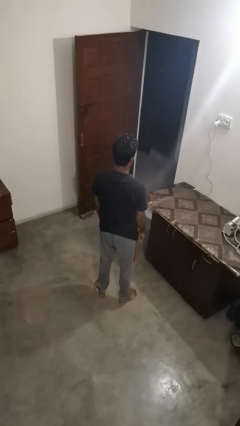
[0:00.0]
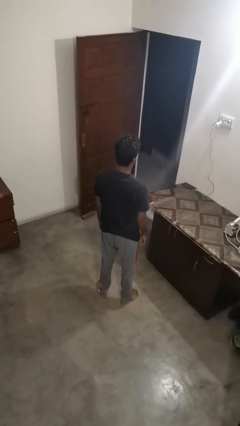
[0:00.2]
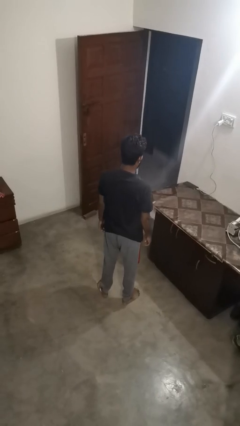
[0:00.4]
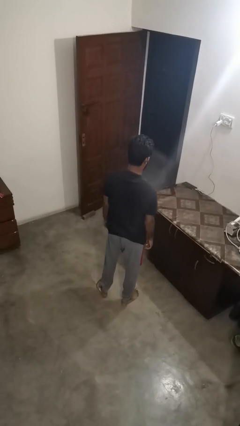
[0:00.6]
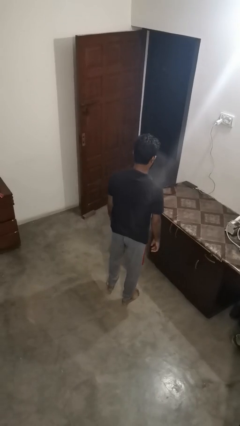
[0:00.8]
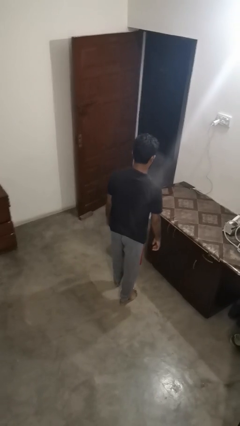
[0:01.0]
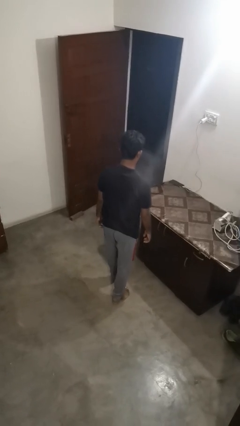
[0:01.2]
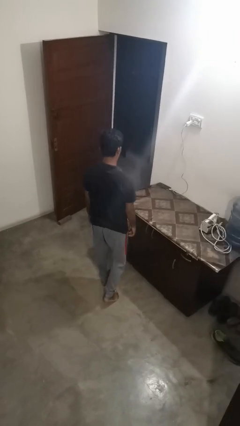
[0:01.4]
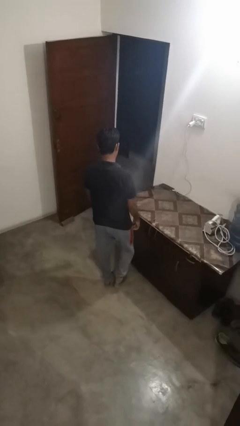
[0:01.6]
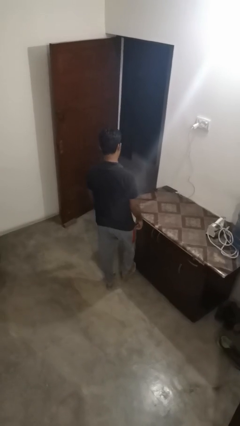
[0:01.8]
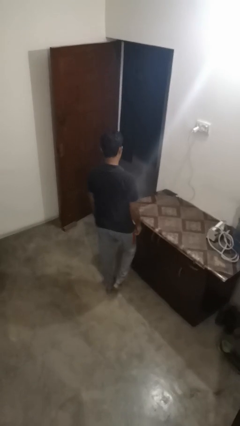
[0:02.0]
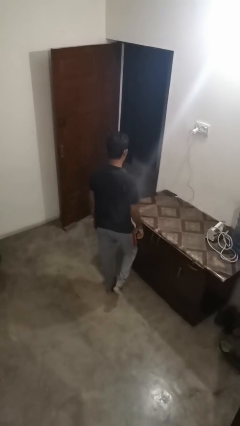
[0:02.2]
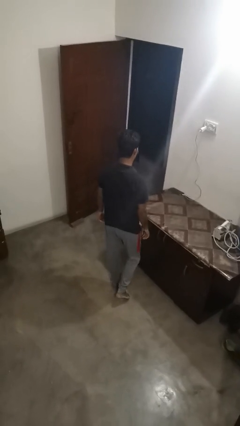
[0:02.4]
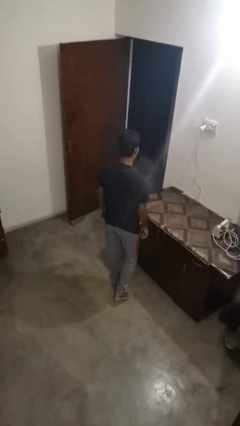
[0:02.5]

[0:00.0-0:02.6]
person bumps into table

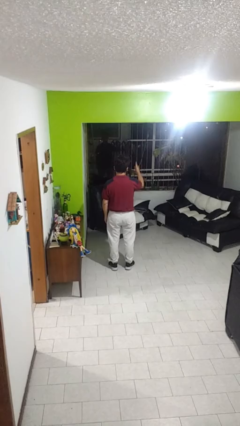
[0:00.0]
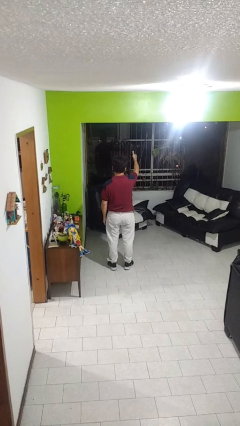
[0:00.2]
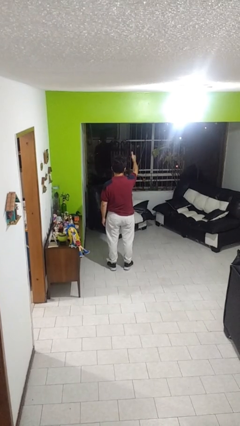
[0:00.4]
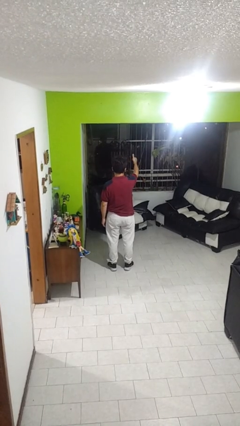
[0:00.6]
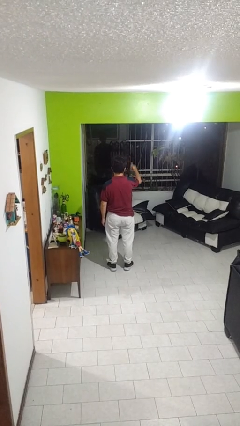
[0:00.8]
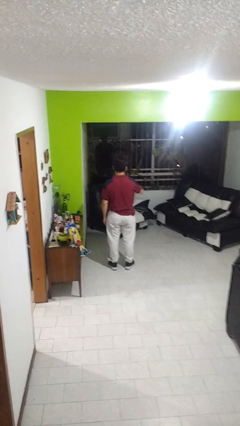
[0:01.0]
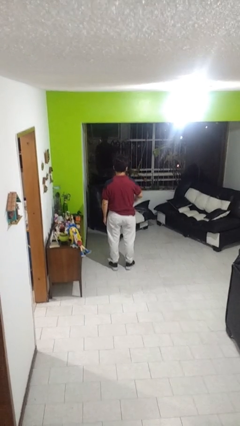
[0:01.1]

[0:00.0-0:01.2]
person gestures thumbs up

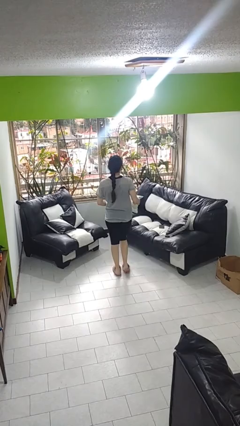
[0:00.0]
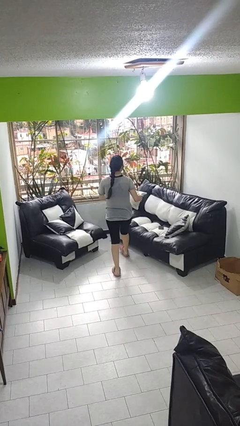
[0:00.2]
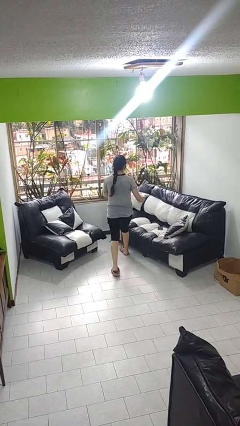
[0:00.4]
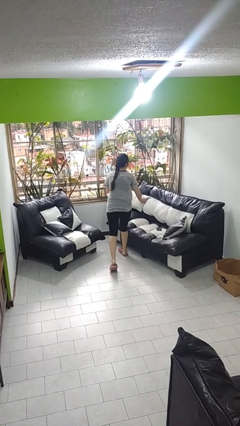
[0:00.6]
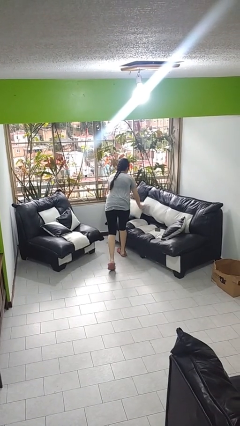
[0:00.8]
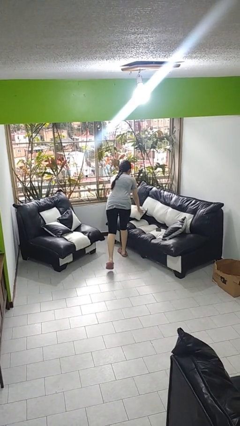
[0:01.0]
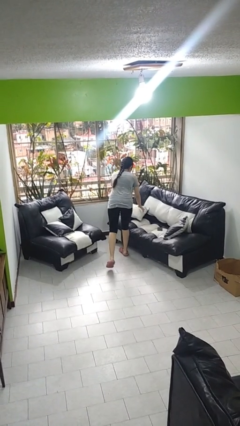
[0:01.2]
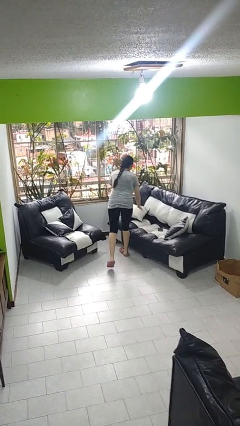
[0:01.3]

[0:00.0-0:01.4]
person puts down object on couch

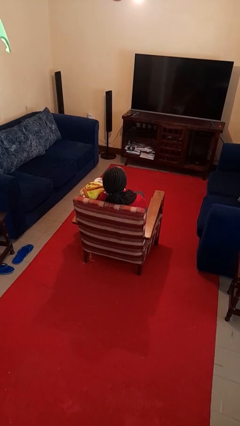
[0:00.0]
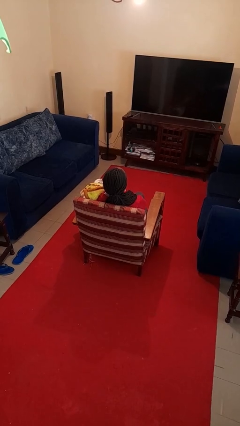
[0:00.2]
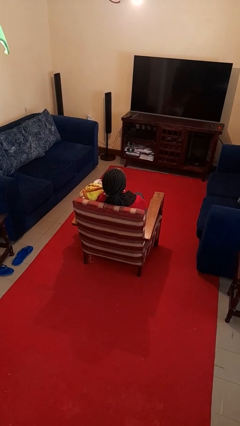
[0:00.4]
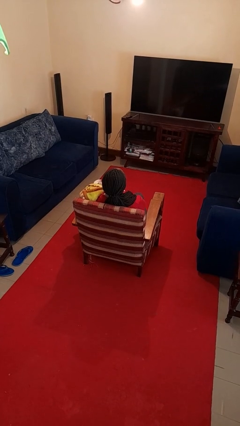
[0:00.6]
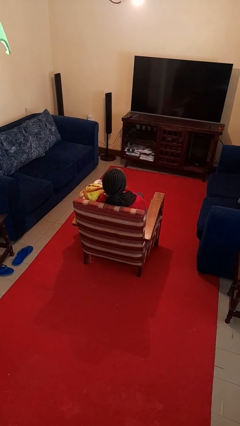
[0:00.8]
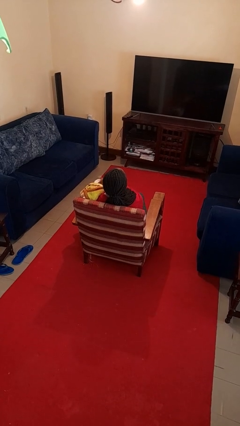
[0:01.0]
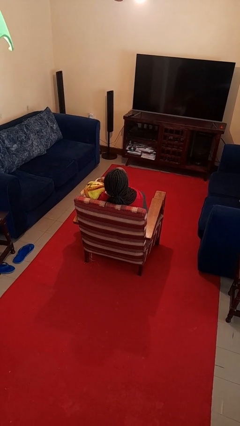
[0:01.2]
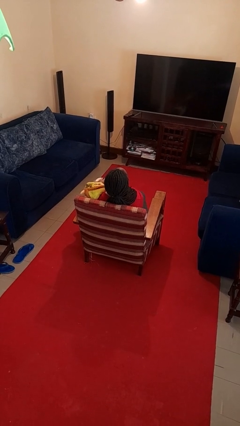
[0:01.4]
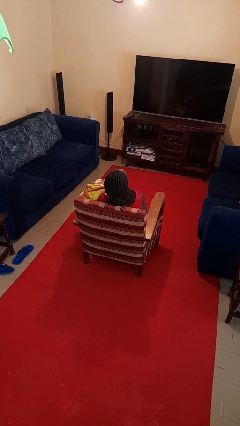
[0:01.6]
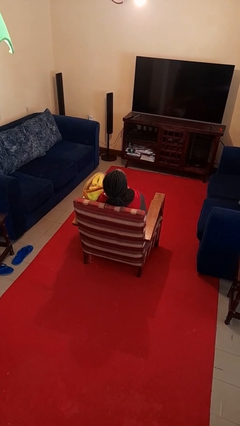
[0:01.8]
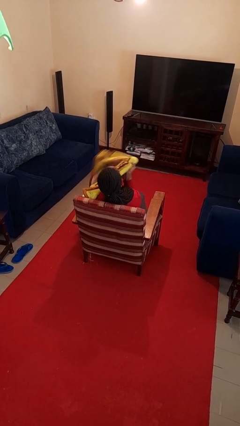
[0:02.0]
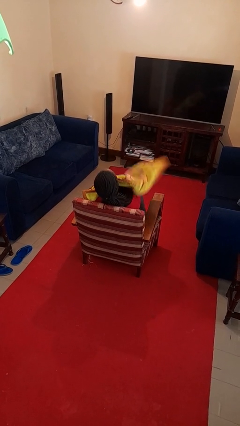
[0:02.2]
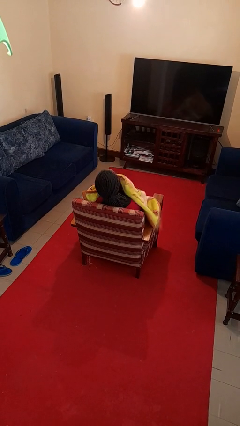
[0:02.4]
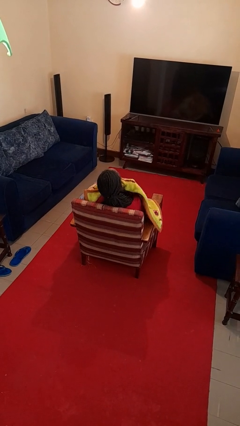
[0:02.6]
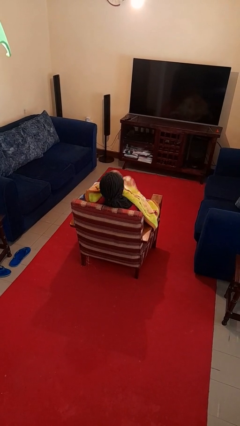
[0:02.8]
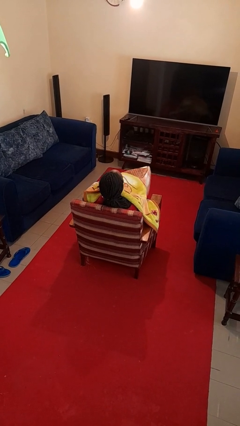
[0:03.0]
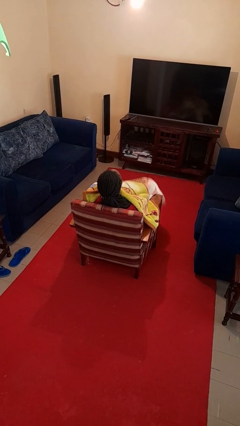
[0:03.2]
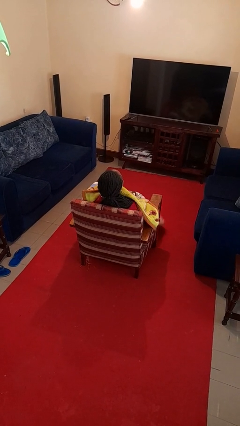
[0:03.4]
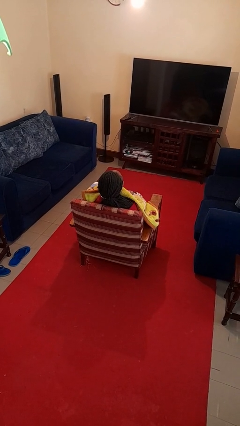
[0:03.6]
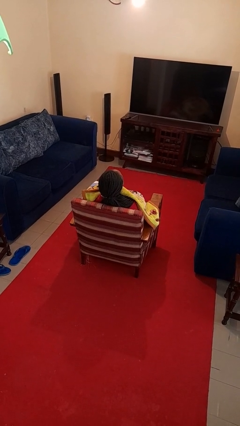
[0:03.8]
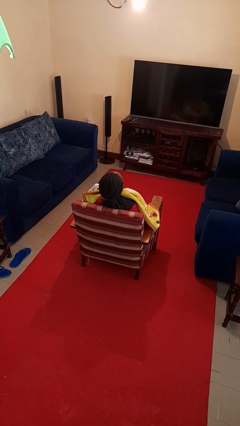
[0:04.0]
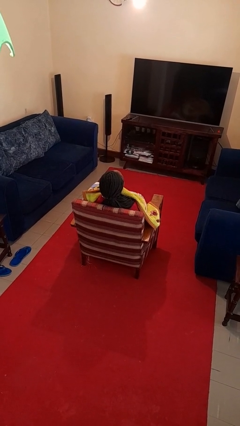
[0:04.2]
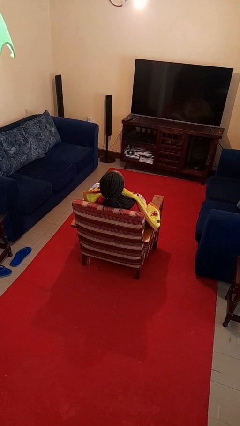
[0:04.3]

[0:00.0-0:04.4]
person covers with blanket

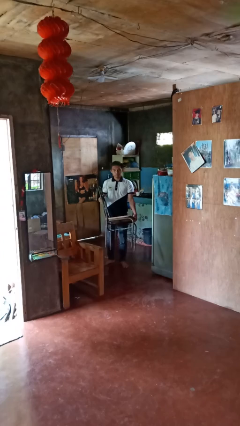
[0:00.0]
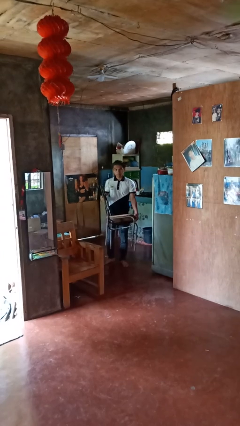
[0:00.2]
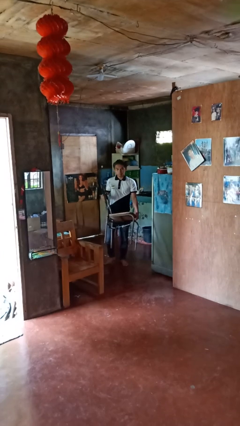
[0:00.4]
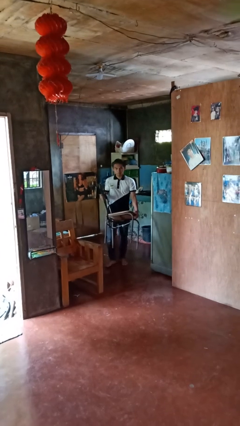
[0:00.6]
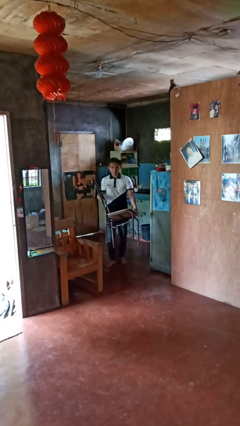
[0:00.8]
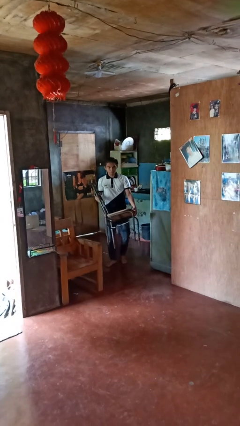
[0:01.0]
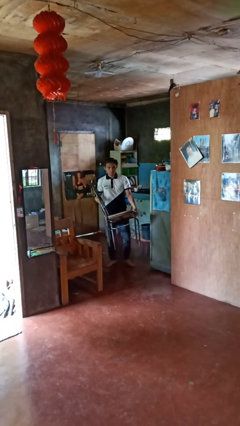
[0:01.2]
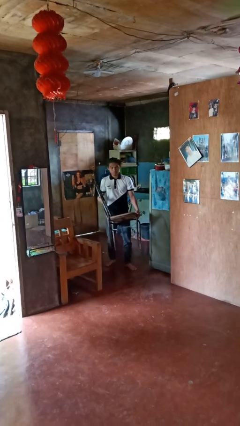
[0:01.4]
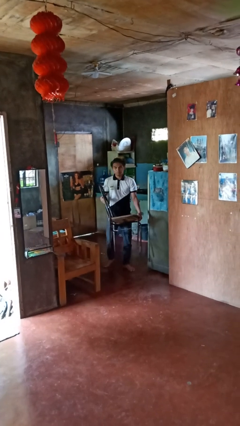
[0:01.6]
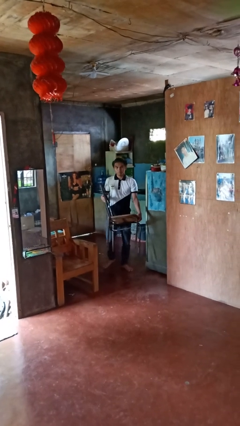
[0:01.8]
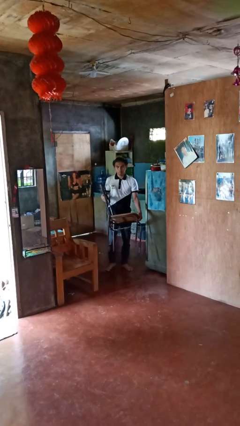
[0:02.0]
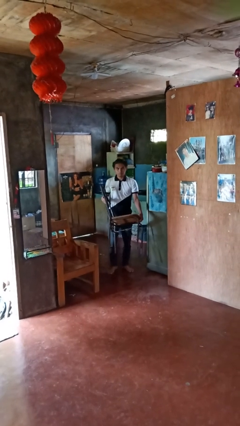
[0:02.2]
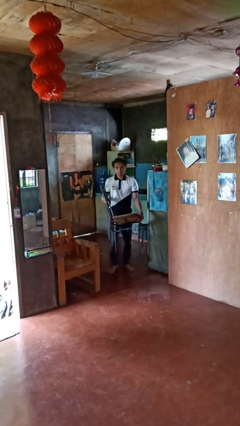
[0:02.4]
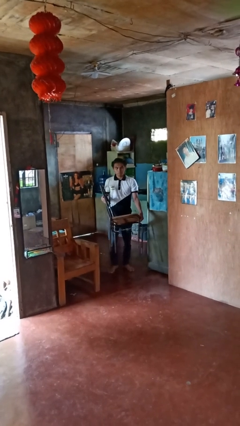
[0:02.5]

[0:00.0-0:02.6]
person carries furniture

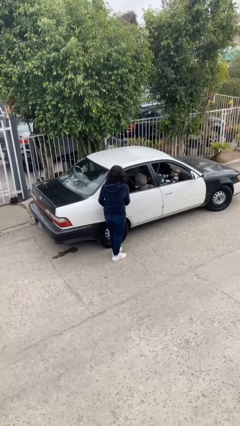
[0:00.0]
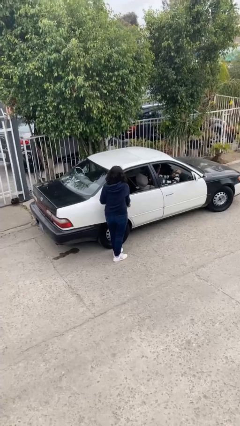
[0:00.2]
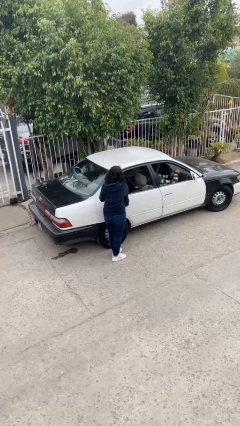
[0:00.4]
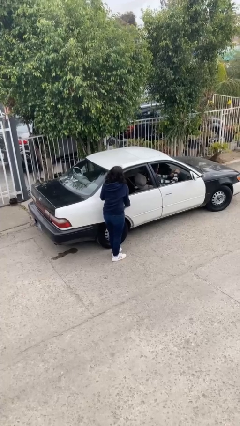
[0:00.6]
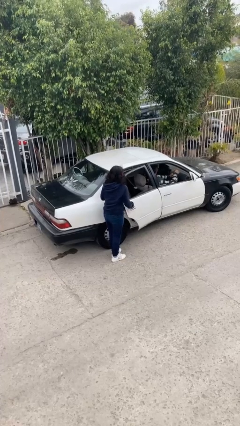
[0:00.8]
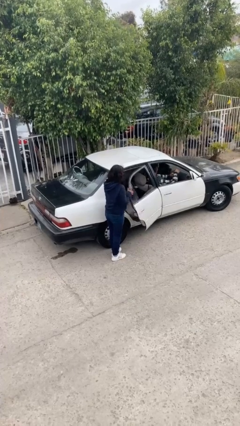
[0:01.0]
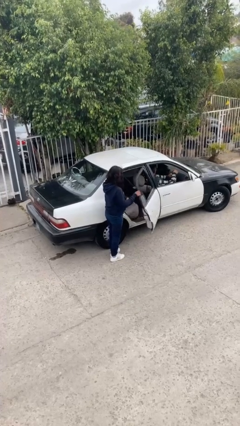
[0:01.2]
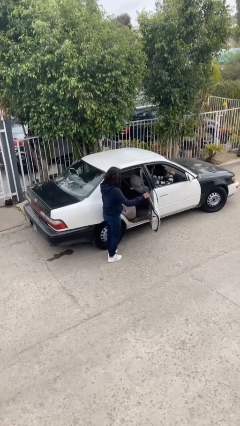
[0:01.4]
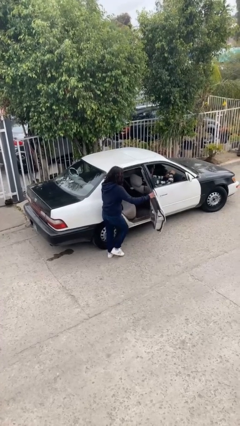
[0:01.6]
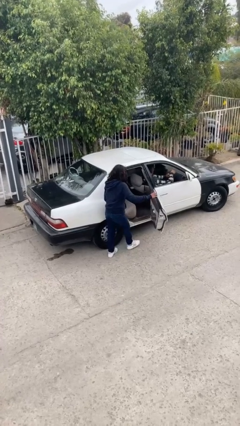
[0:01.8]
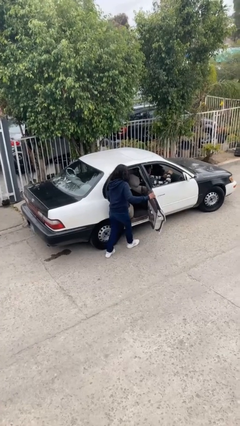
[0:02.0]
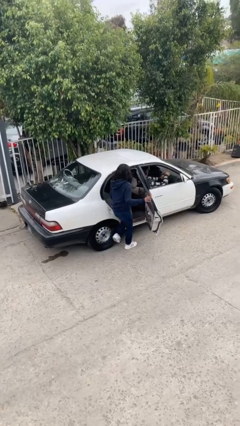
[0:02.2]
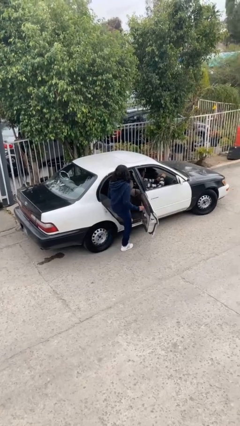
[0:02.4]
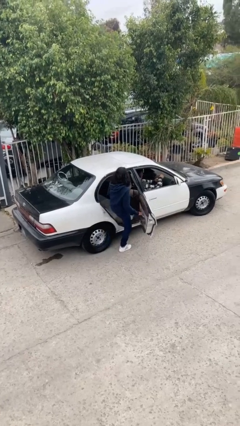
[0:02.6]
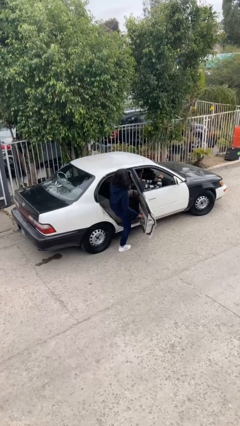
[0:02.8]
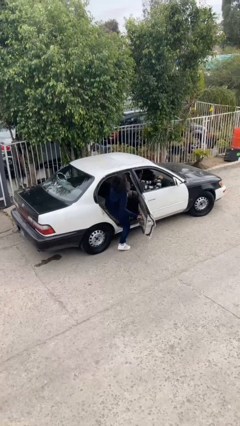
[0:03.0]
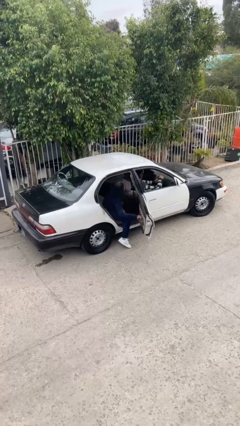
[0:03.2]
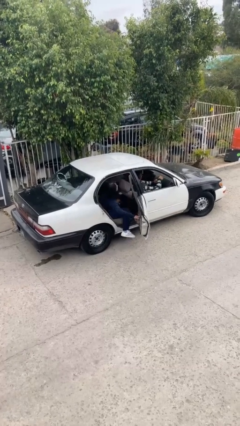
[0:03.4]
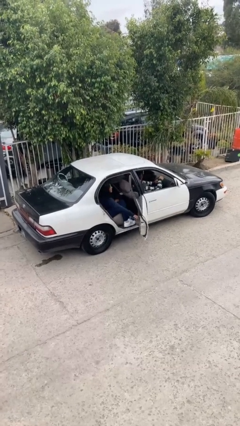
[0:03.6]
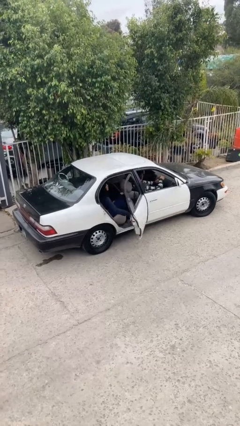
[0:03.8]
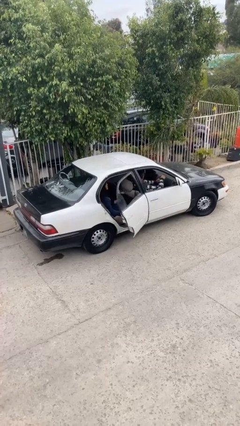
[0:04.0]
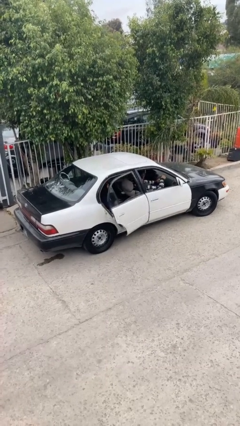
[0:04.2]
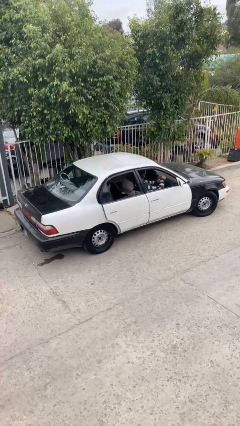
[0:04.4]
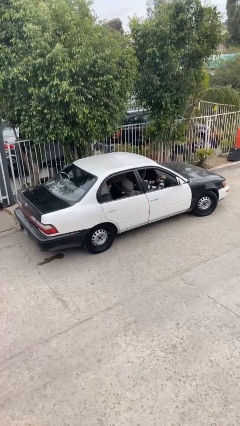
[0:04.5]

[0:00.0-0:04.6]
car picks up person

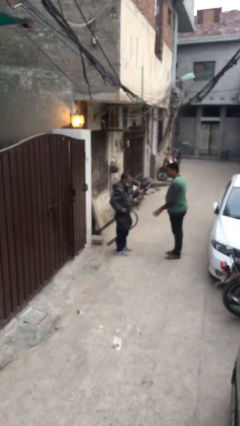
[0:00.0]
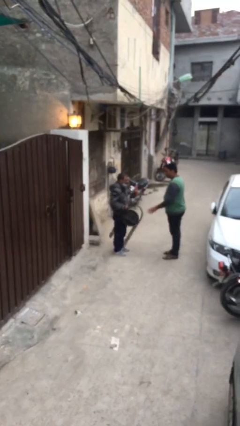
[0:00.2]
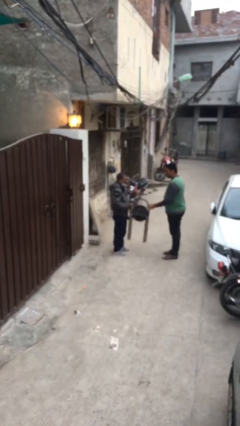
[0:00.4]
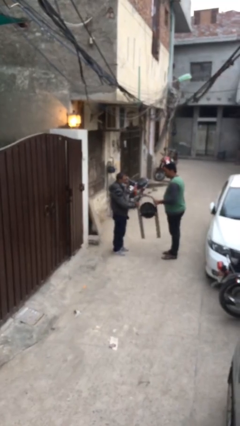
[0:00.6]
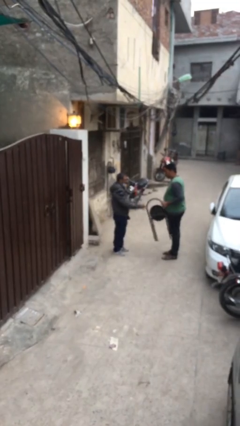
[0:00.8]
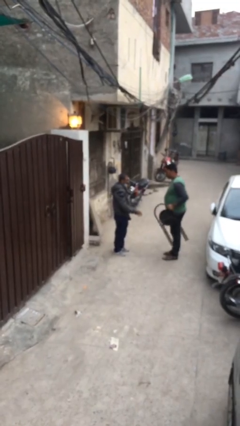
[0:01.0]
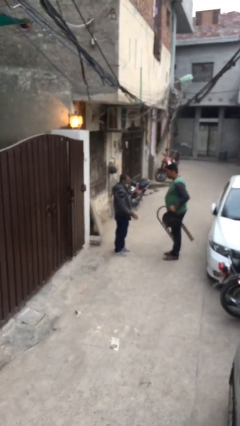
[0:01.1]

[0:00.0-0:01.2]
person transfers object to person
